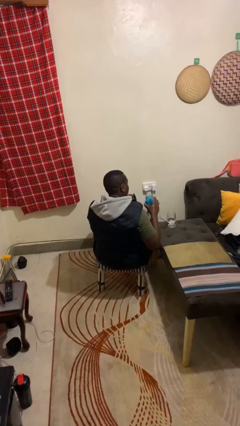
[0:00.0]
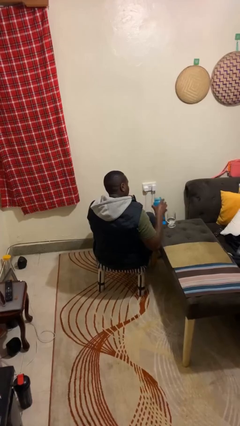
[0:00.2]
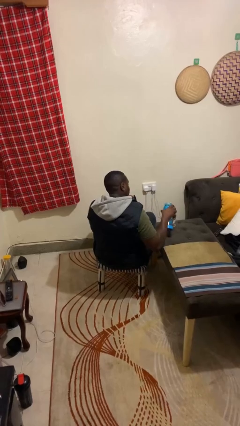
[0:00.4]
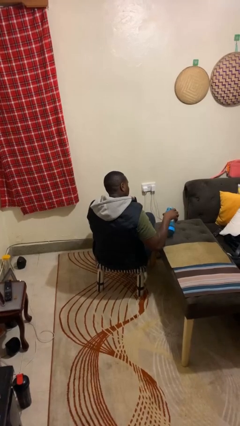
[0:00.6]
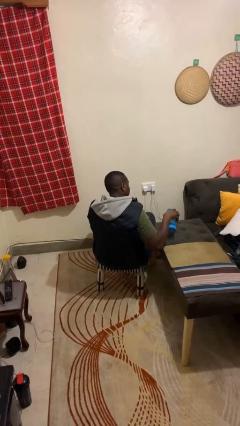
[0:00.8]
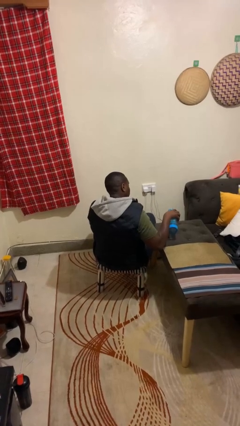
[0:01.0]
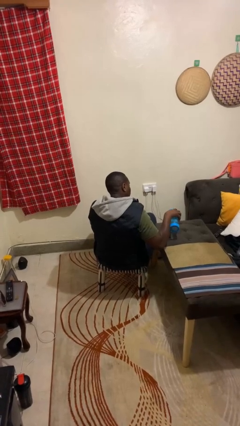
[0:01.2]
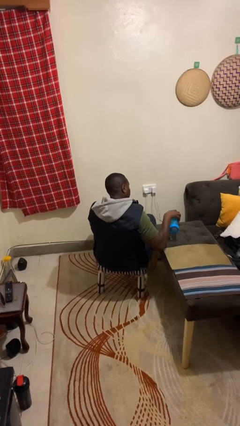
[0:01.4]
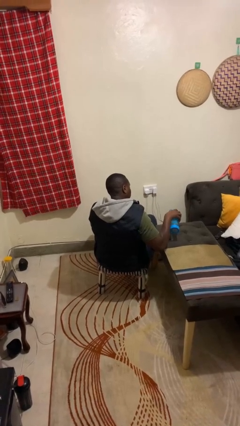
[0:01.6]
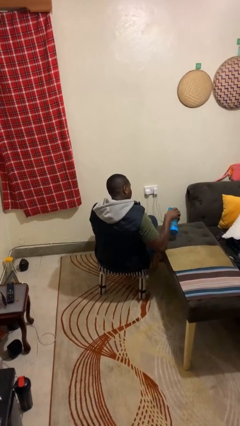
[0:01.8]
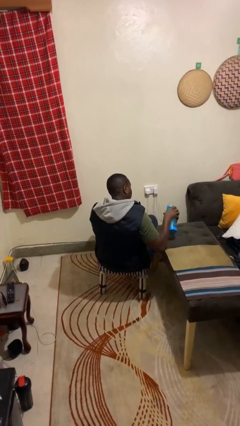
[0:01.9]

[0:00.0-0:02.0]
person pours liquid into cup

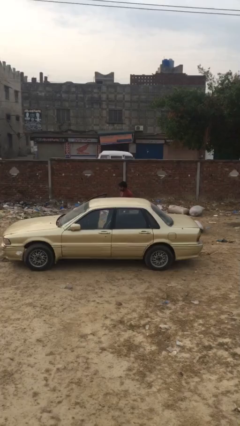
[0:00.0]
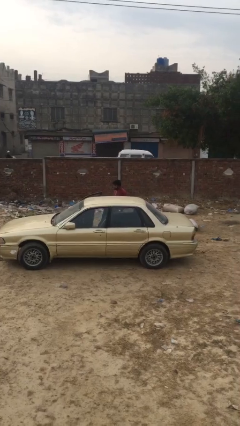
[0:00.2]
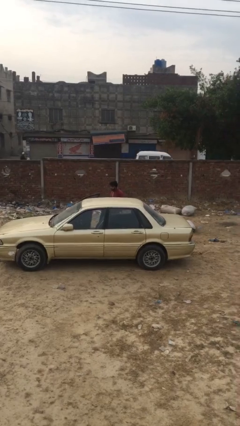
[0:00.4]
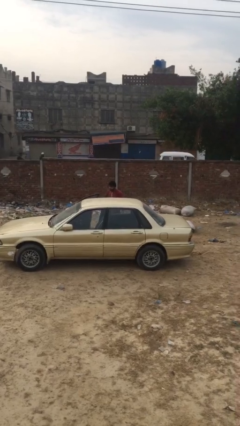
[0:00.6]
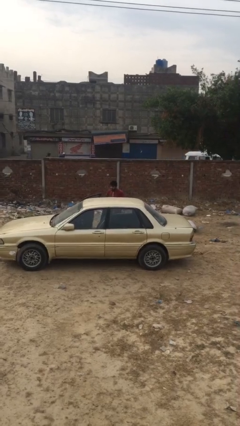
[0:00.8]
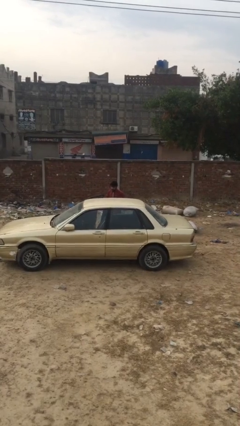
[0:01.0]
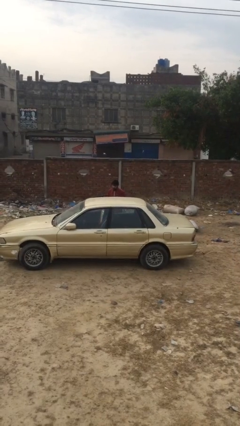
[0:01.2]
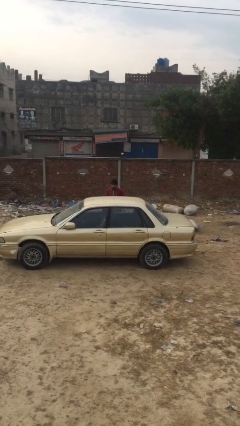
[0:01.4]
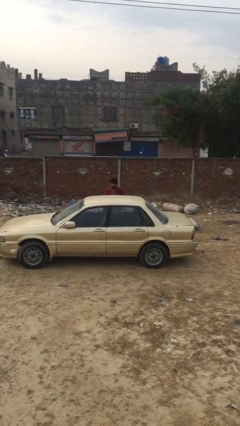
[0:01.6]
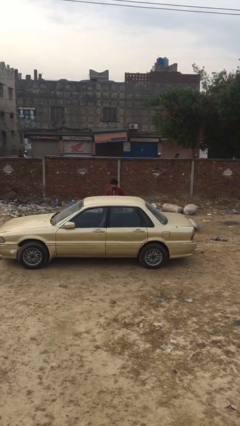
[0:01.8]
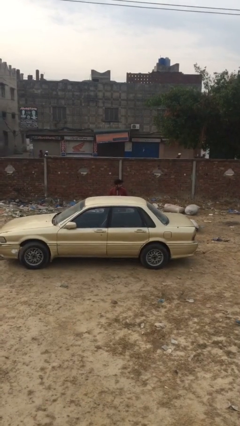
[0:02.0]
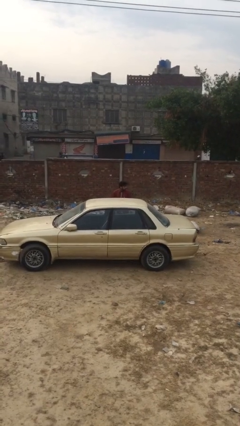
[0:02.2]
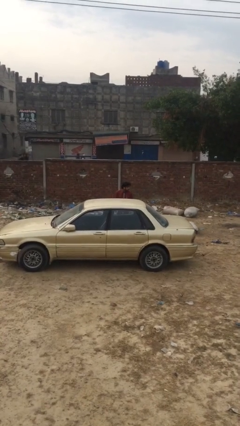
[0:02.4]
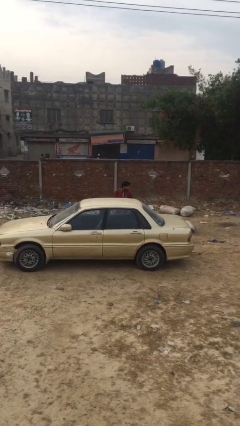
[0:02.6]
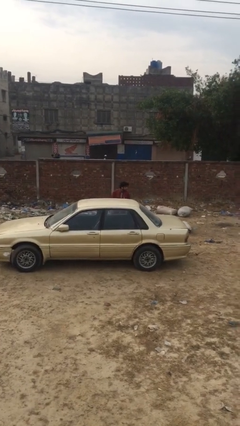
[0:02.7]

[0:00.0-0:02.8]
person closes car door

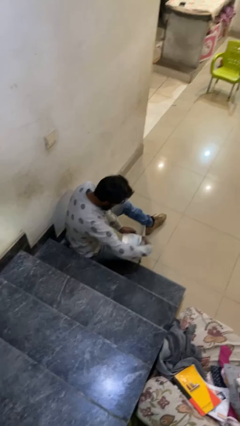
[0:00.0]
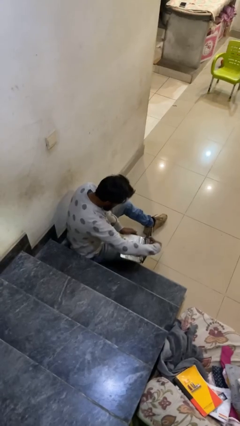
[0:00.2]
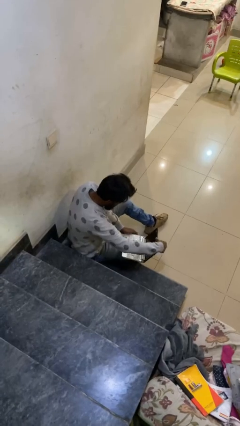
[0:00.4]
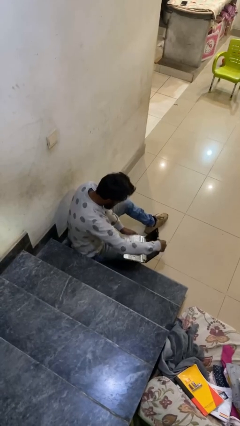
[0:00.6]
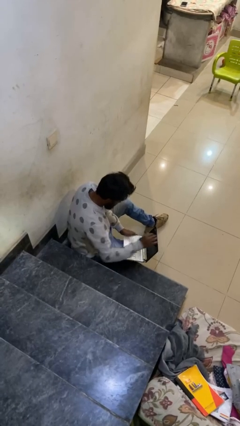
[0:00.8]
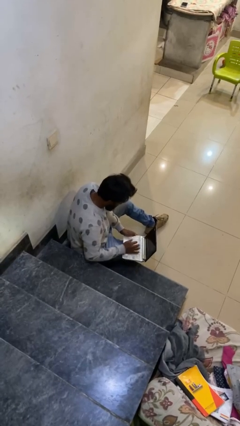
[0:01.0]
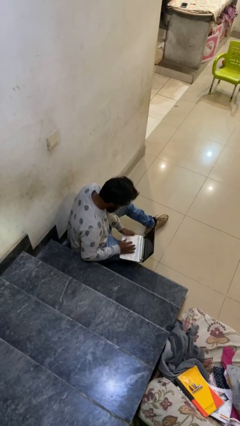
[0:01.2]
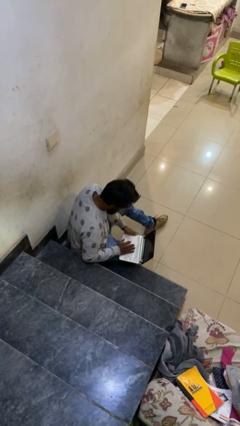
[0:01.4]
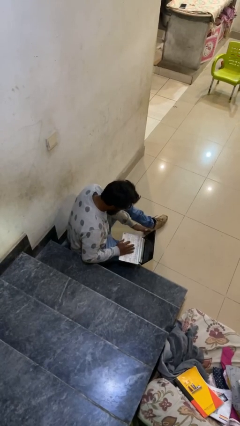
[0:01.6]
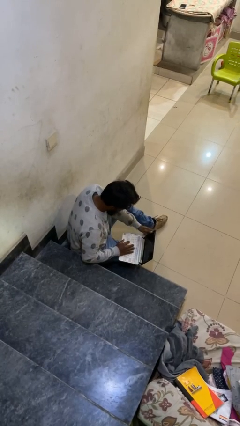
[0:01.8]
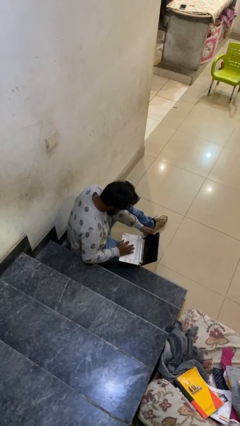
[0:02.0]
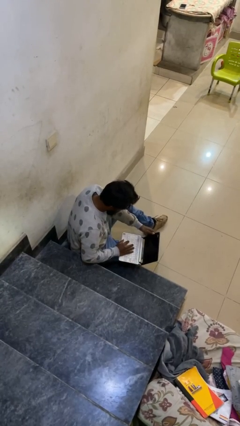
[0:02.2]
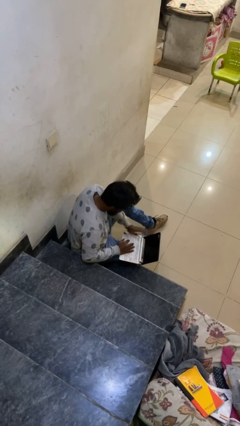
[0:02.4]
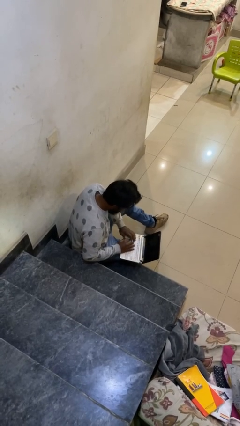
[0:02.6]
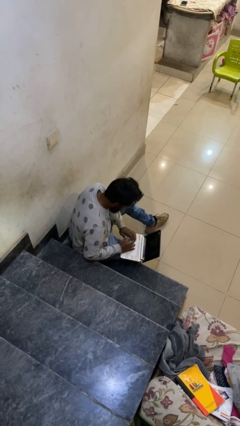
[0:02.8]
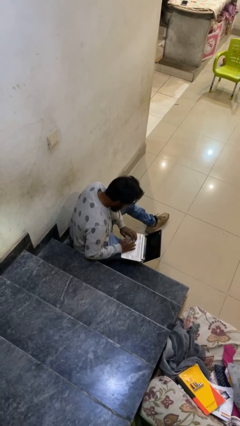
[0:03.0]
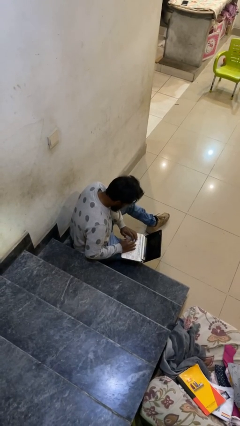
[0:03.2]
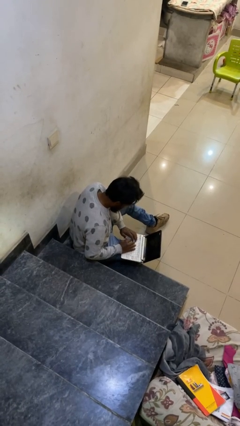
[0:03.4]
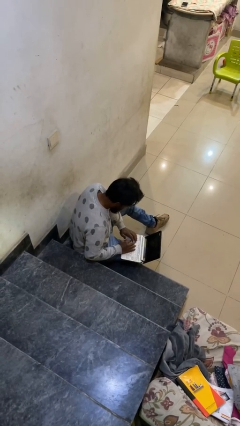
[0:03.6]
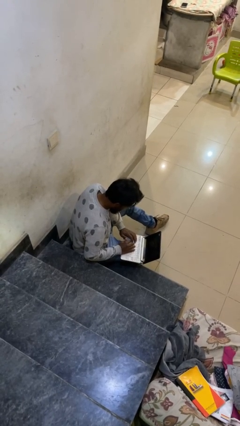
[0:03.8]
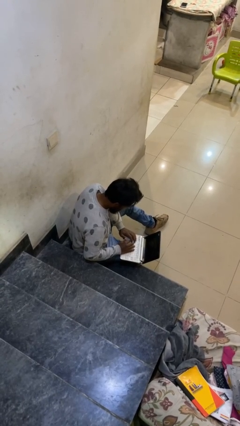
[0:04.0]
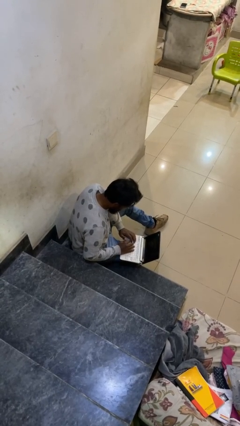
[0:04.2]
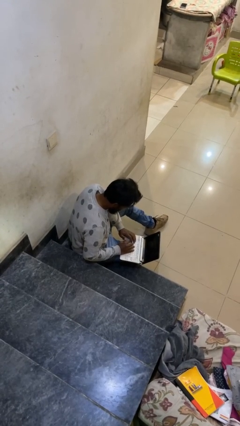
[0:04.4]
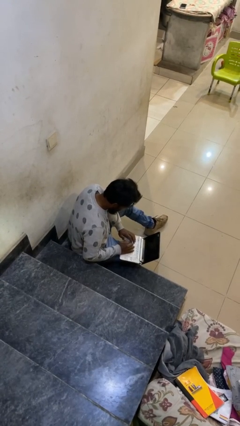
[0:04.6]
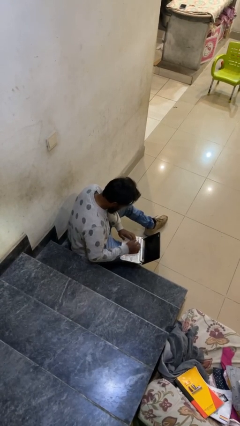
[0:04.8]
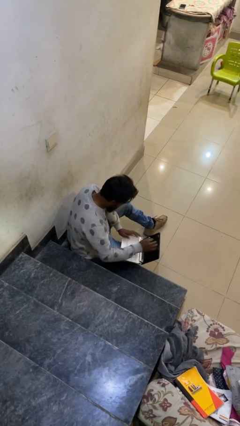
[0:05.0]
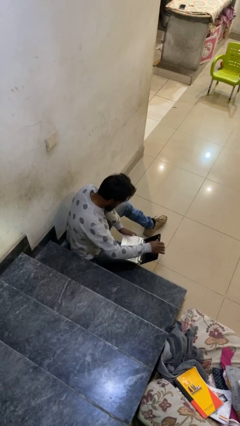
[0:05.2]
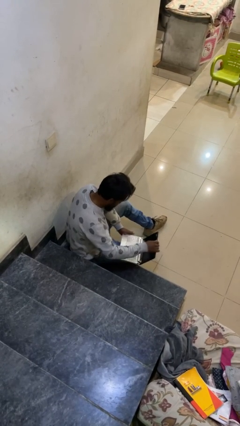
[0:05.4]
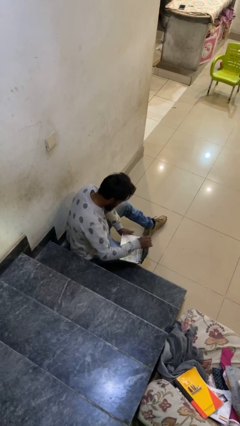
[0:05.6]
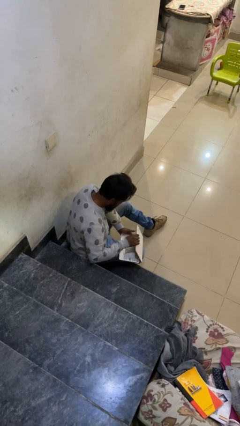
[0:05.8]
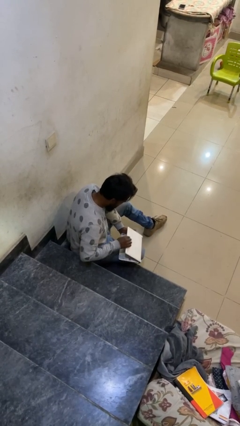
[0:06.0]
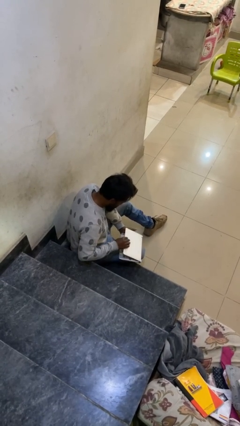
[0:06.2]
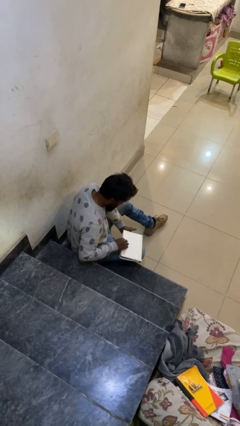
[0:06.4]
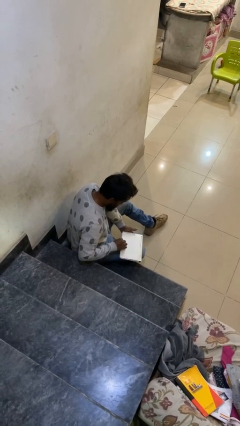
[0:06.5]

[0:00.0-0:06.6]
person interacts with laptop

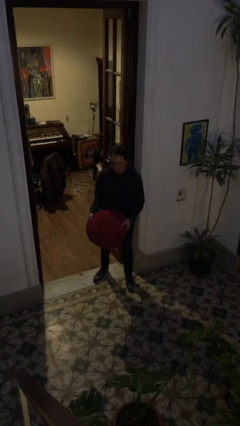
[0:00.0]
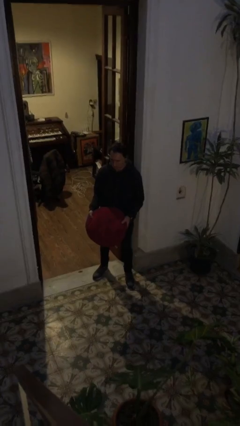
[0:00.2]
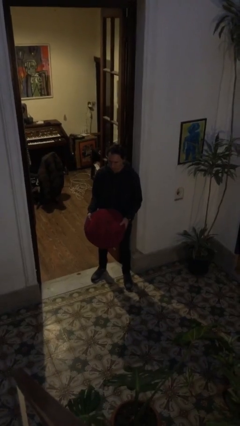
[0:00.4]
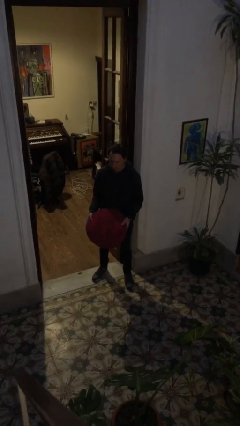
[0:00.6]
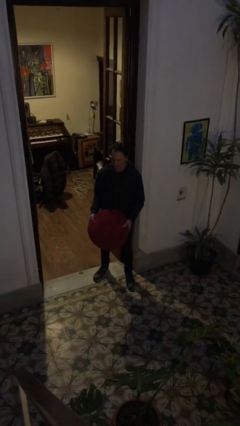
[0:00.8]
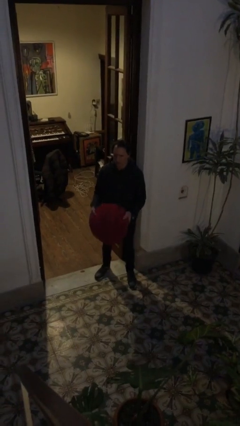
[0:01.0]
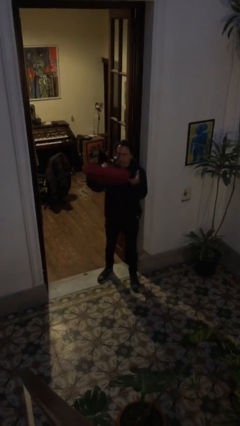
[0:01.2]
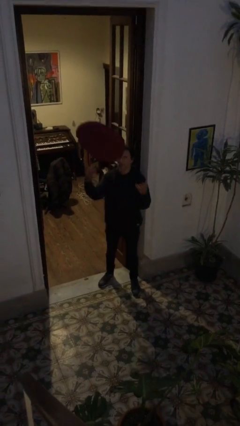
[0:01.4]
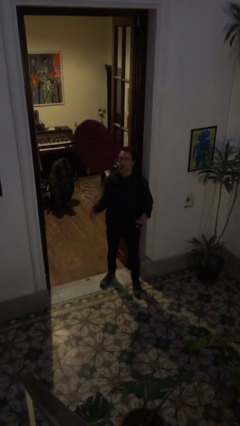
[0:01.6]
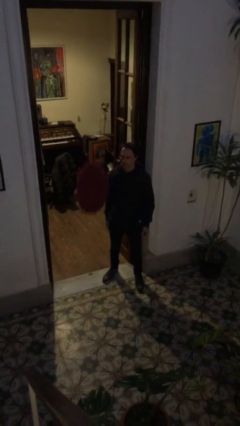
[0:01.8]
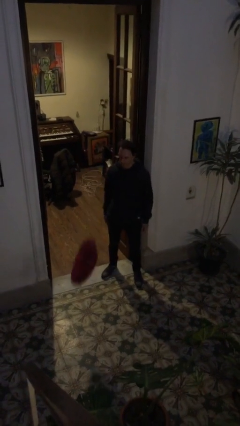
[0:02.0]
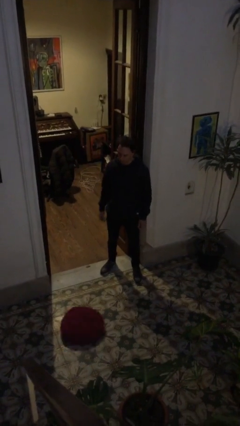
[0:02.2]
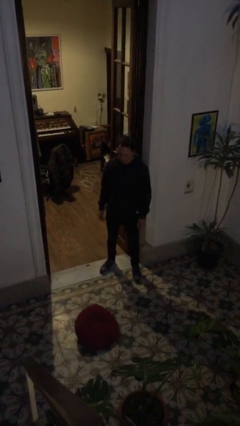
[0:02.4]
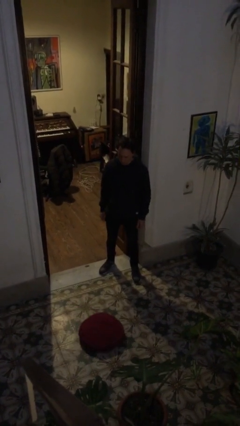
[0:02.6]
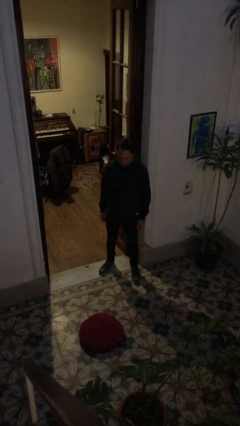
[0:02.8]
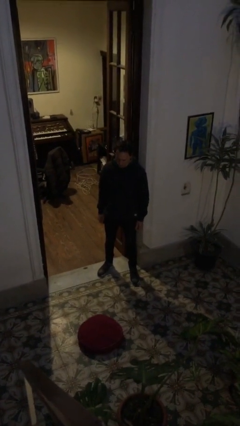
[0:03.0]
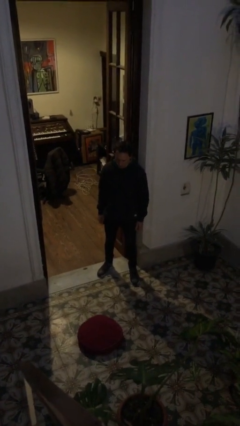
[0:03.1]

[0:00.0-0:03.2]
person throws object into air

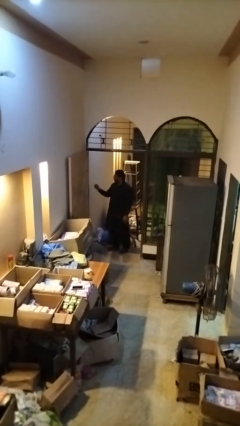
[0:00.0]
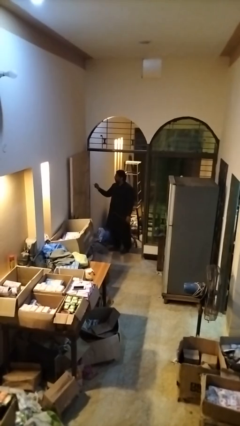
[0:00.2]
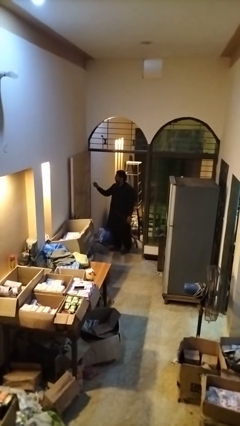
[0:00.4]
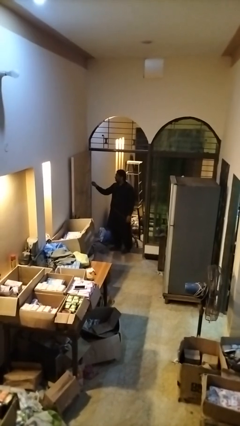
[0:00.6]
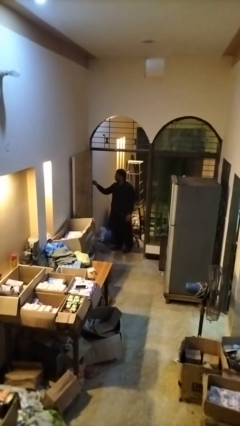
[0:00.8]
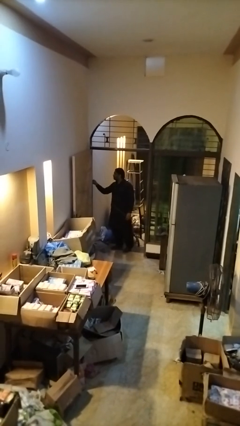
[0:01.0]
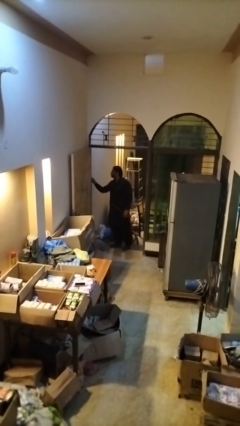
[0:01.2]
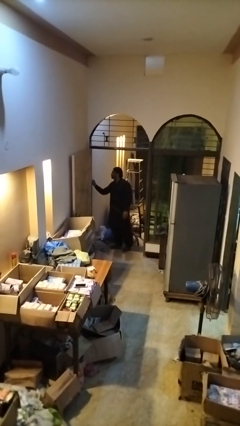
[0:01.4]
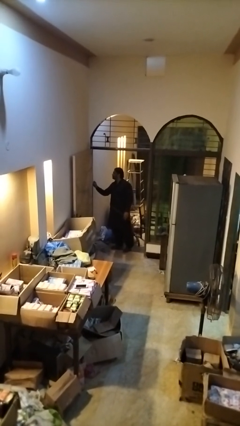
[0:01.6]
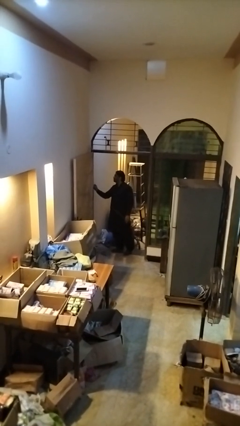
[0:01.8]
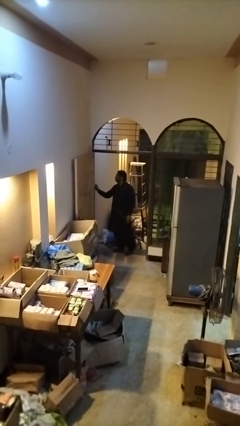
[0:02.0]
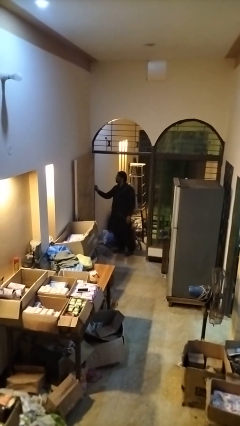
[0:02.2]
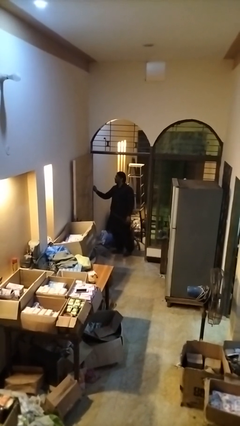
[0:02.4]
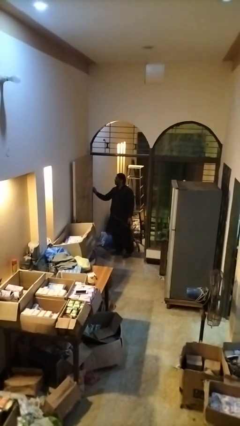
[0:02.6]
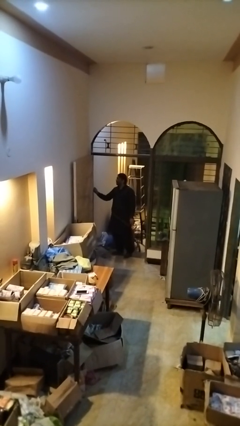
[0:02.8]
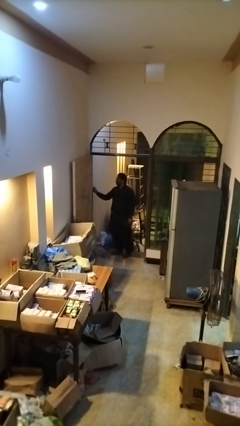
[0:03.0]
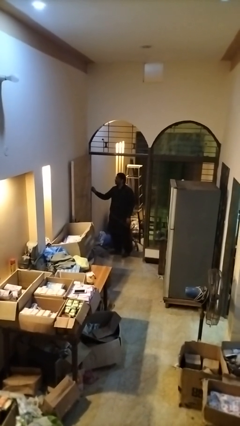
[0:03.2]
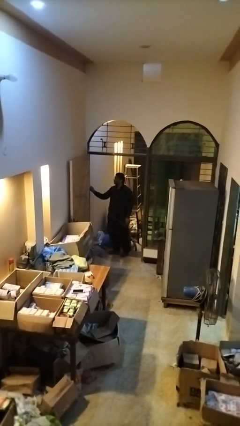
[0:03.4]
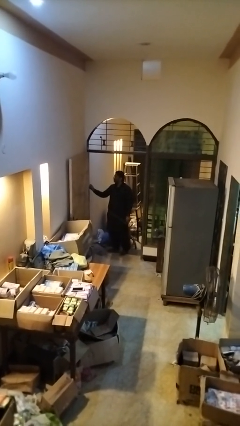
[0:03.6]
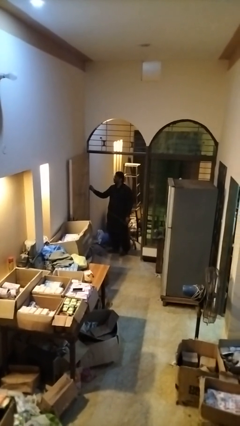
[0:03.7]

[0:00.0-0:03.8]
person plugs into electrical socket
